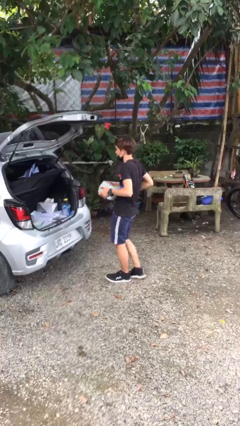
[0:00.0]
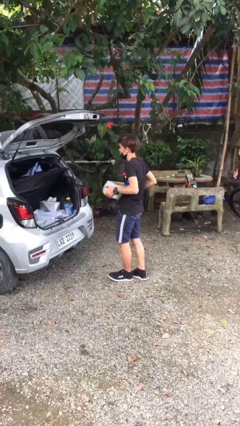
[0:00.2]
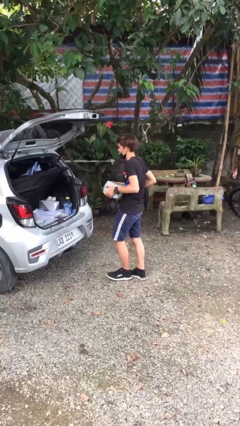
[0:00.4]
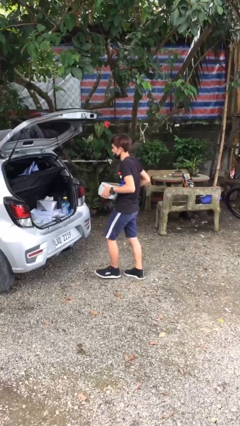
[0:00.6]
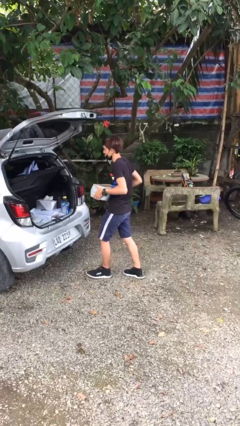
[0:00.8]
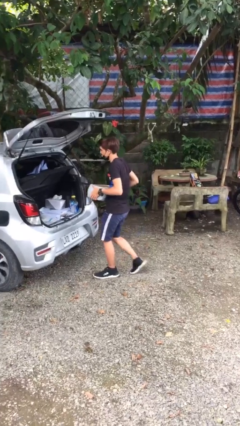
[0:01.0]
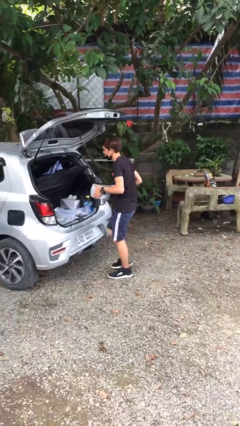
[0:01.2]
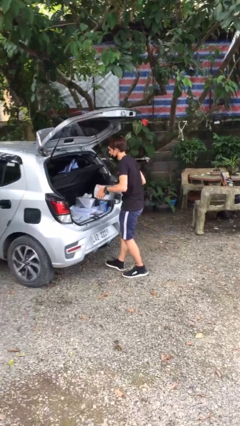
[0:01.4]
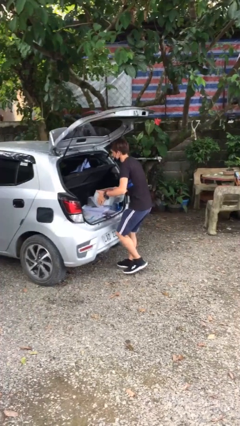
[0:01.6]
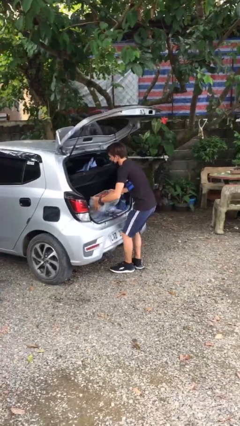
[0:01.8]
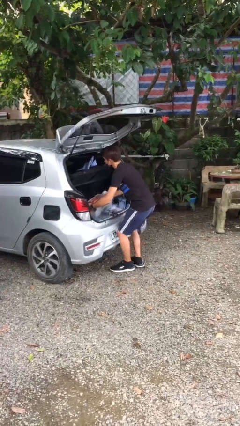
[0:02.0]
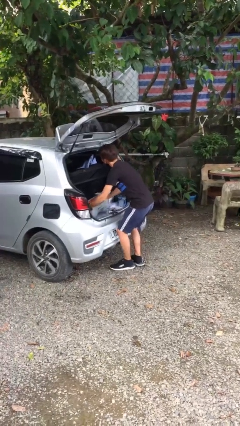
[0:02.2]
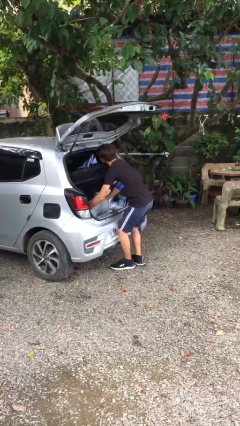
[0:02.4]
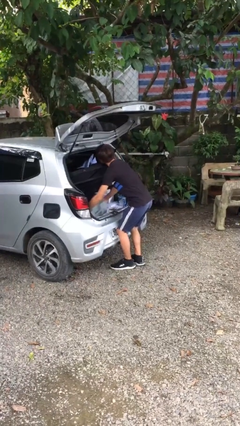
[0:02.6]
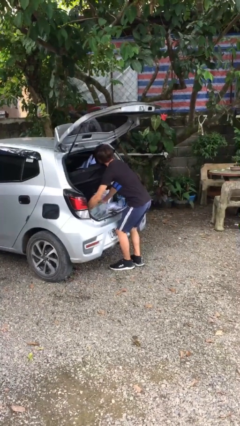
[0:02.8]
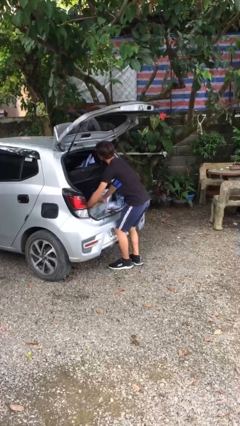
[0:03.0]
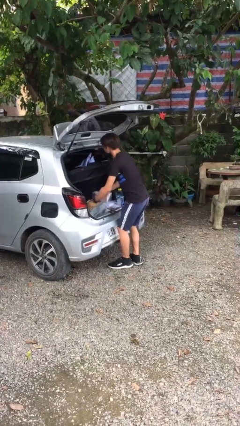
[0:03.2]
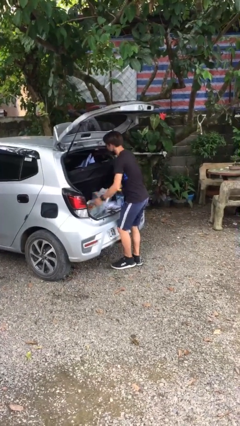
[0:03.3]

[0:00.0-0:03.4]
person loads car

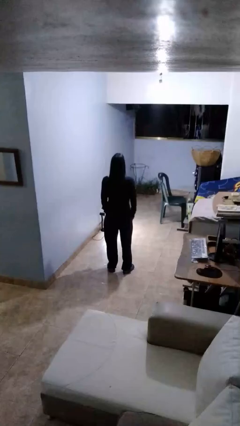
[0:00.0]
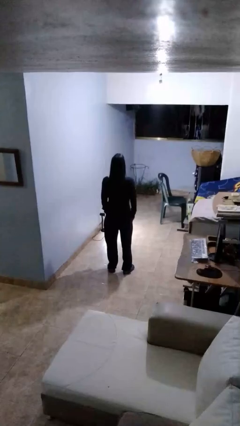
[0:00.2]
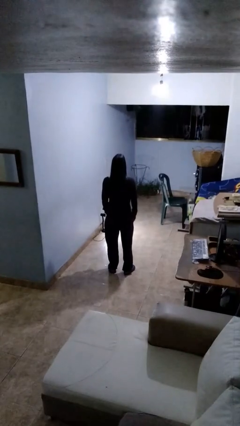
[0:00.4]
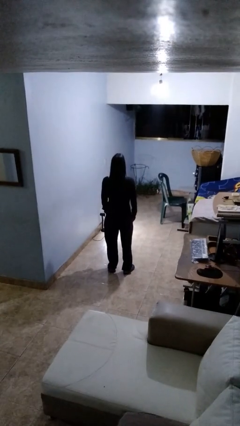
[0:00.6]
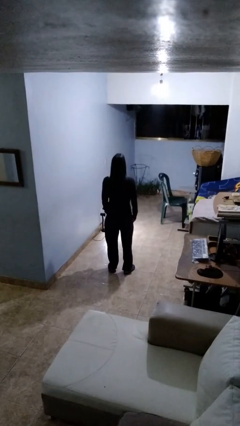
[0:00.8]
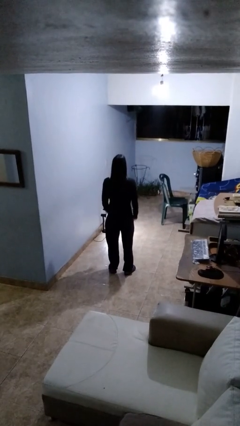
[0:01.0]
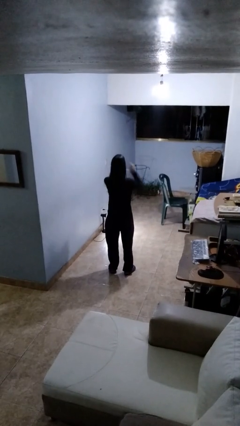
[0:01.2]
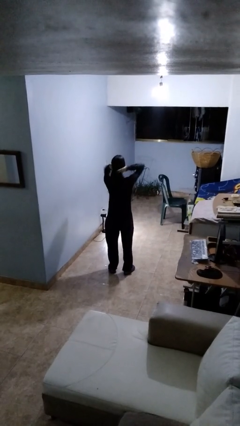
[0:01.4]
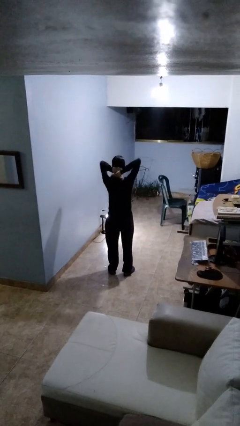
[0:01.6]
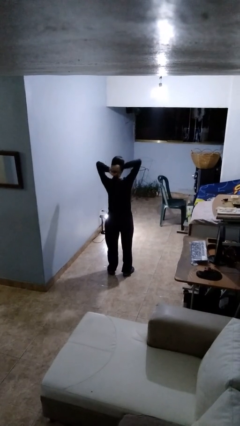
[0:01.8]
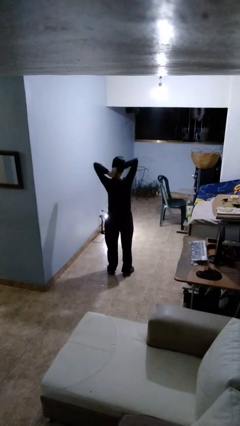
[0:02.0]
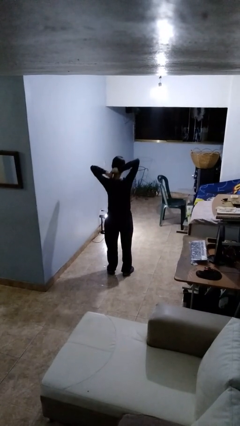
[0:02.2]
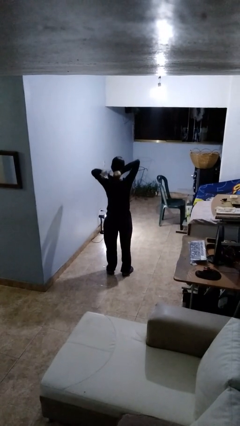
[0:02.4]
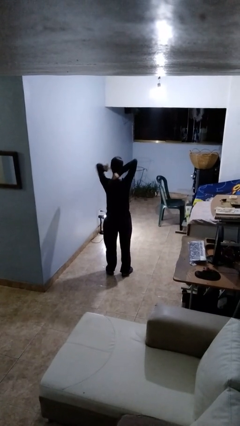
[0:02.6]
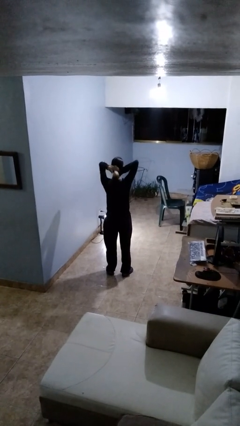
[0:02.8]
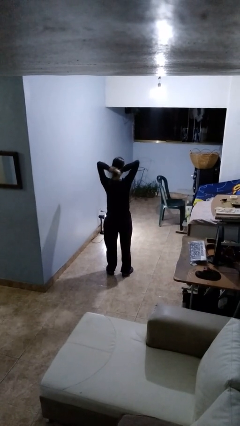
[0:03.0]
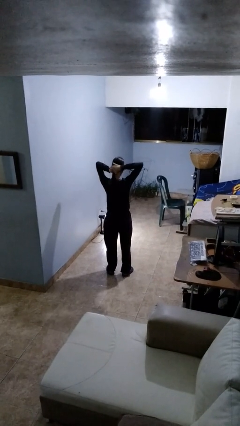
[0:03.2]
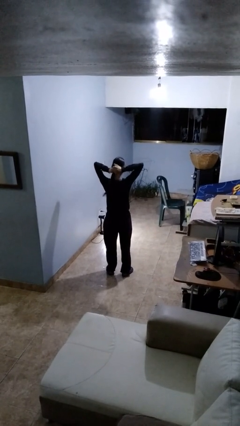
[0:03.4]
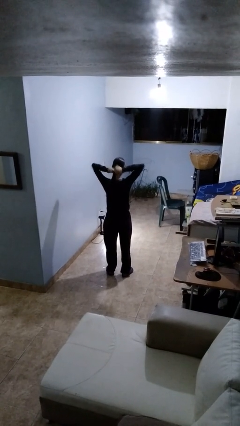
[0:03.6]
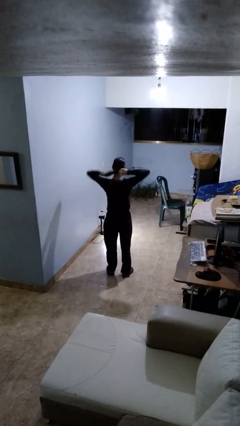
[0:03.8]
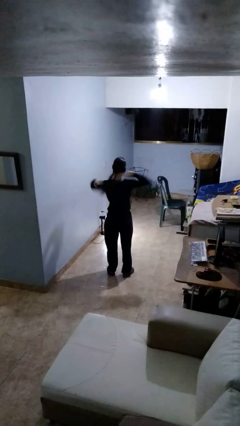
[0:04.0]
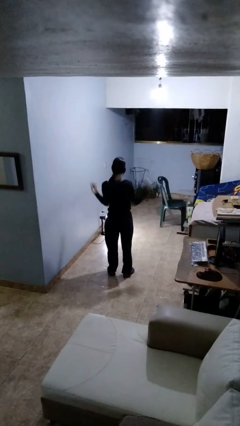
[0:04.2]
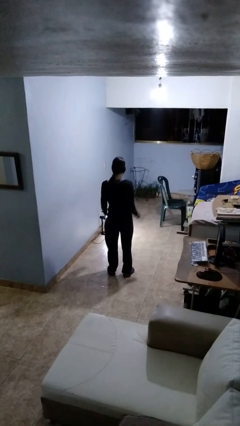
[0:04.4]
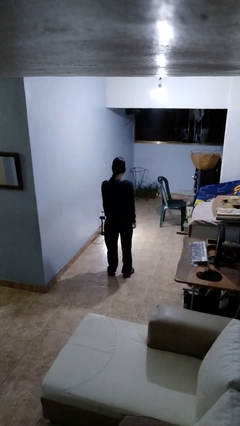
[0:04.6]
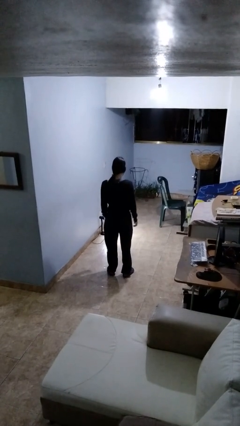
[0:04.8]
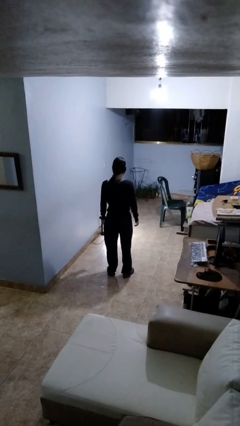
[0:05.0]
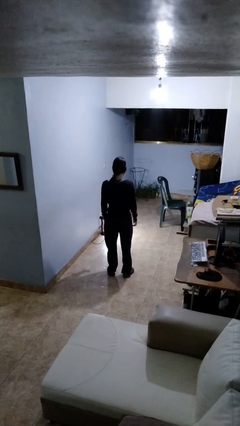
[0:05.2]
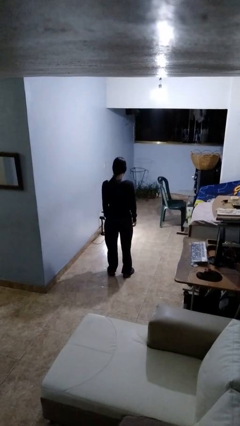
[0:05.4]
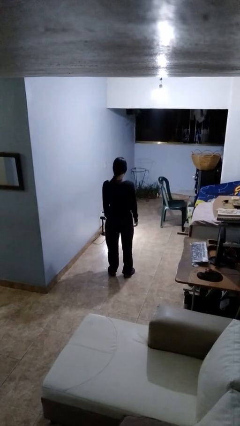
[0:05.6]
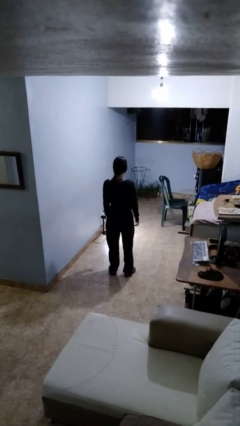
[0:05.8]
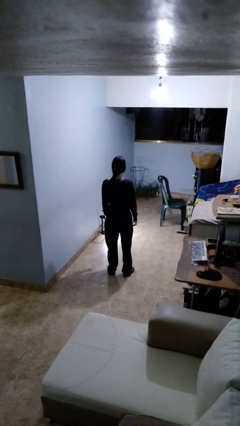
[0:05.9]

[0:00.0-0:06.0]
person puts hair in ponytail

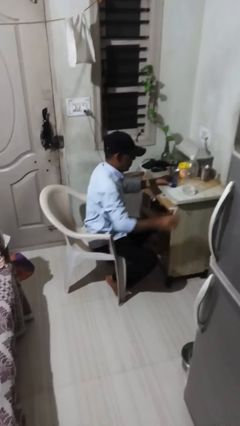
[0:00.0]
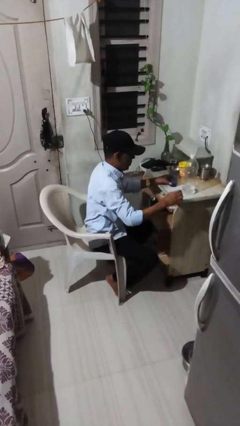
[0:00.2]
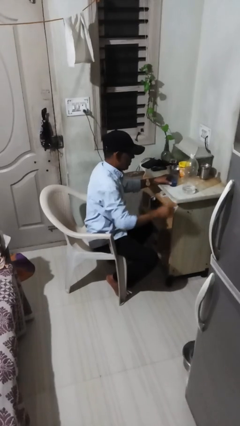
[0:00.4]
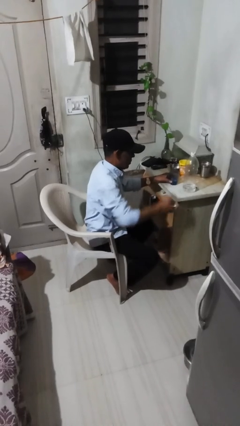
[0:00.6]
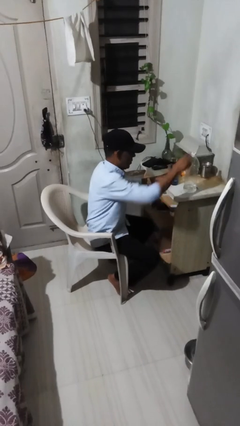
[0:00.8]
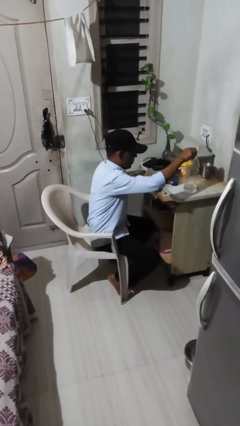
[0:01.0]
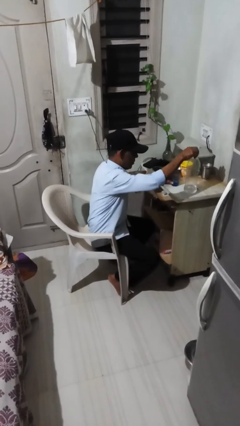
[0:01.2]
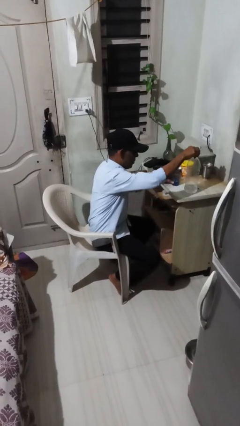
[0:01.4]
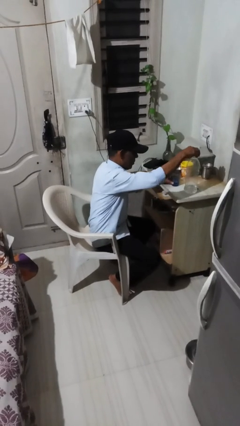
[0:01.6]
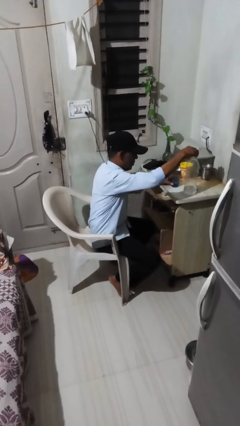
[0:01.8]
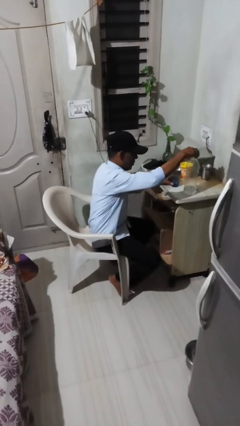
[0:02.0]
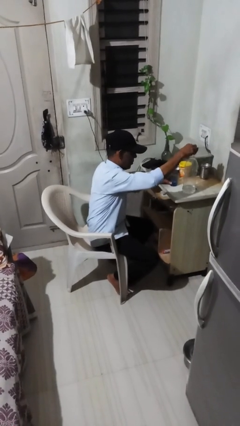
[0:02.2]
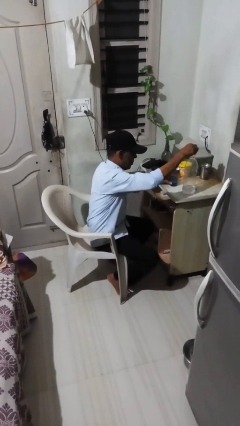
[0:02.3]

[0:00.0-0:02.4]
person unscrews lid from bottle

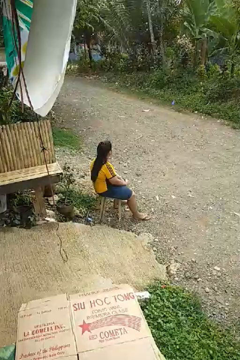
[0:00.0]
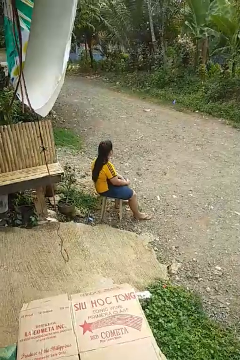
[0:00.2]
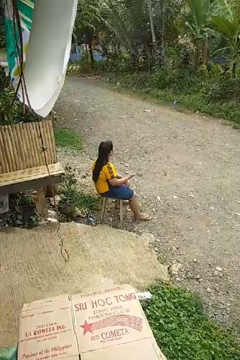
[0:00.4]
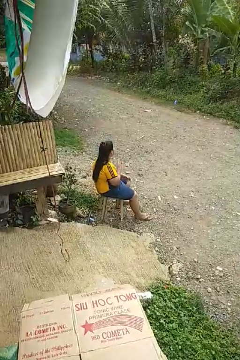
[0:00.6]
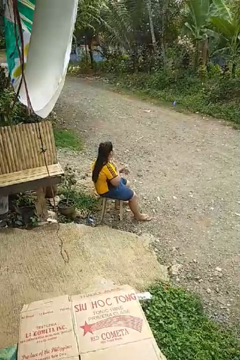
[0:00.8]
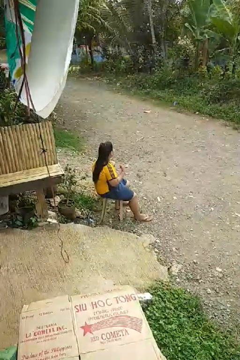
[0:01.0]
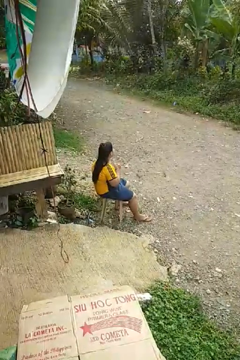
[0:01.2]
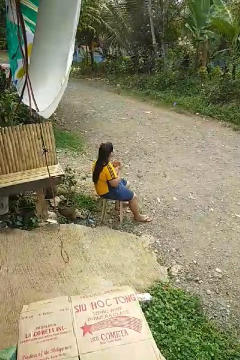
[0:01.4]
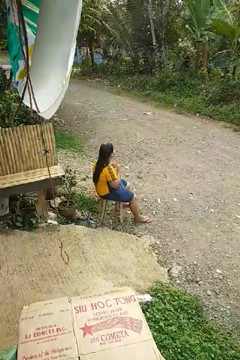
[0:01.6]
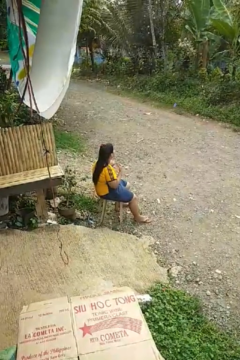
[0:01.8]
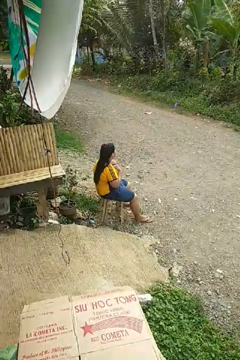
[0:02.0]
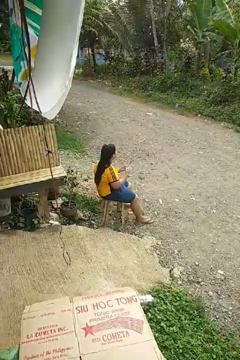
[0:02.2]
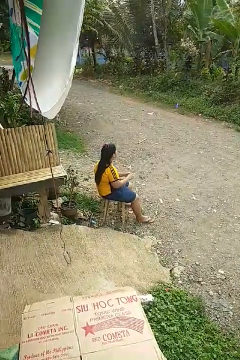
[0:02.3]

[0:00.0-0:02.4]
person drums on chest

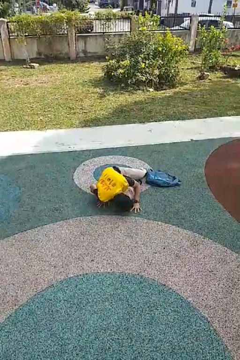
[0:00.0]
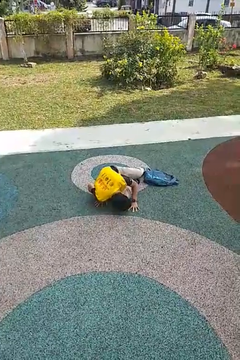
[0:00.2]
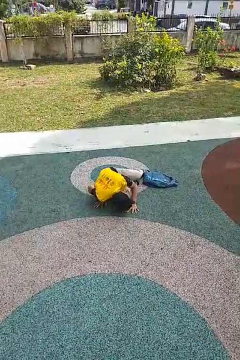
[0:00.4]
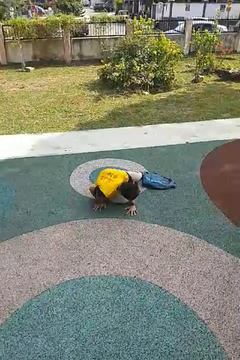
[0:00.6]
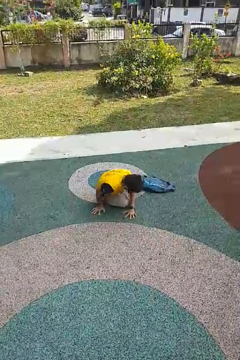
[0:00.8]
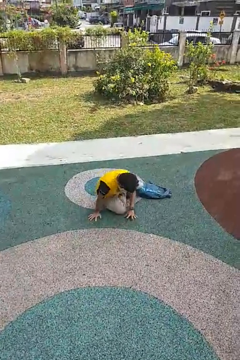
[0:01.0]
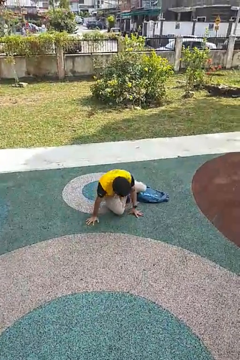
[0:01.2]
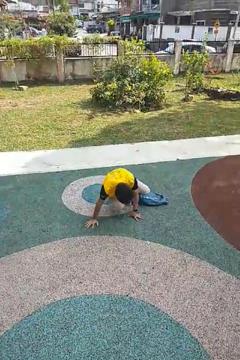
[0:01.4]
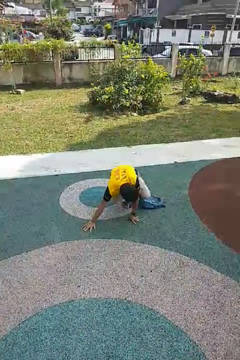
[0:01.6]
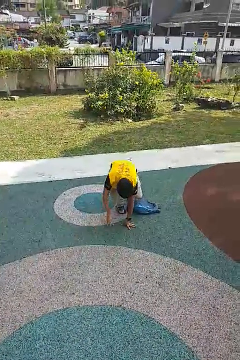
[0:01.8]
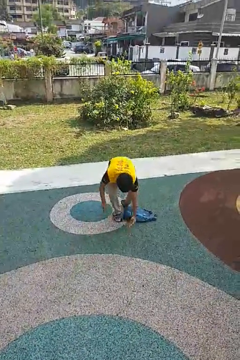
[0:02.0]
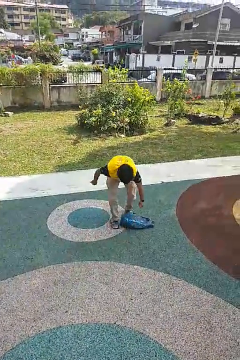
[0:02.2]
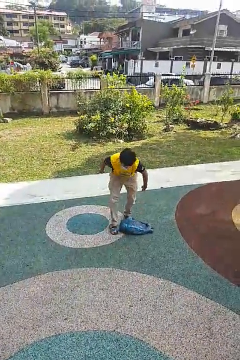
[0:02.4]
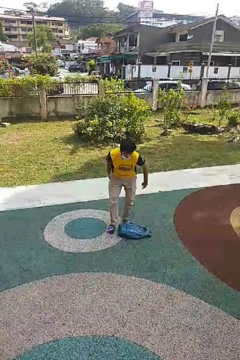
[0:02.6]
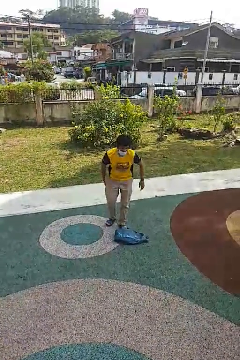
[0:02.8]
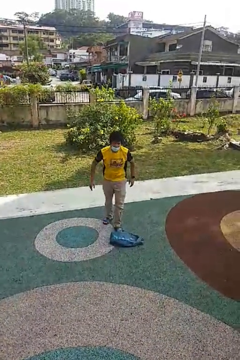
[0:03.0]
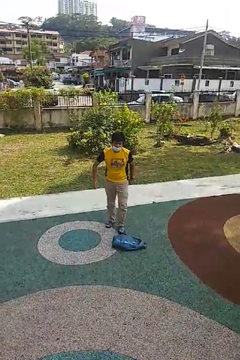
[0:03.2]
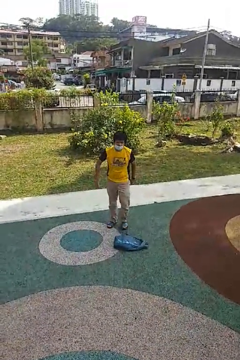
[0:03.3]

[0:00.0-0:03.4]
person stands up from floor

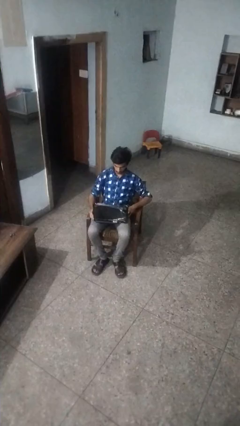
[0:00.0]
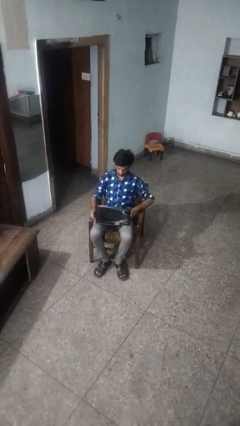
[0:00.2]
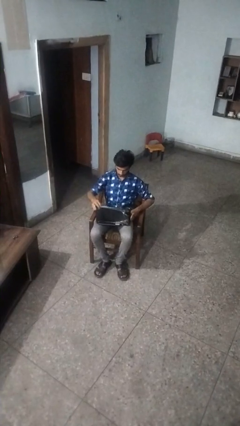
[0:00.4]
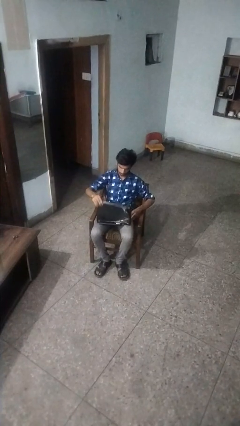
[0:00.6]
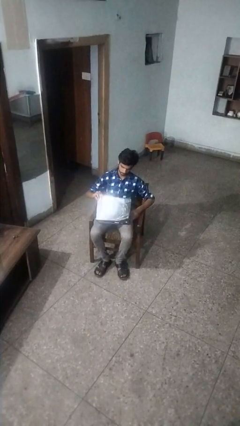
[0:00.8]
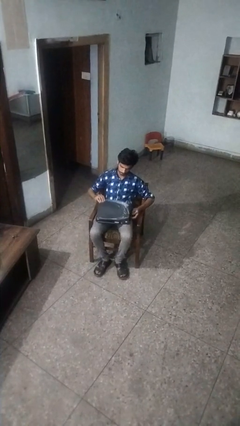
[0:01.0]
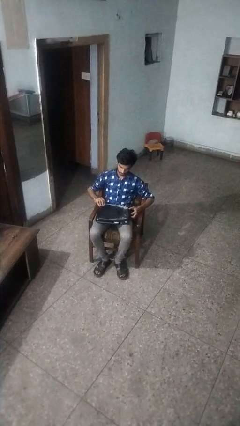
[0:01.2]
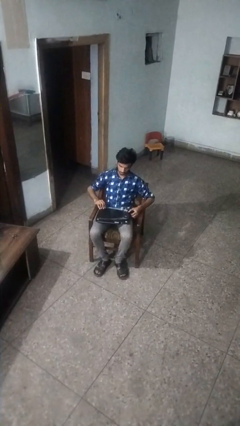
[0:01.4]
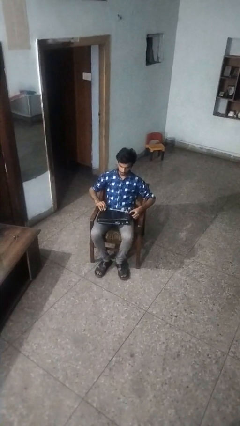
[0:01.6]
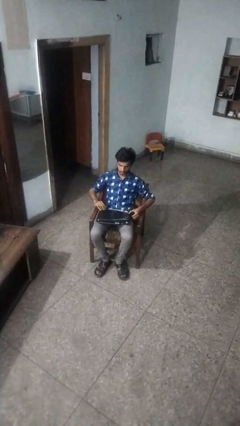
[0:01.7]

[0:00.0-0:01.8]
person closes laptop
